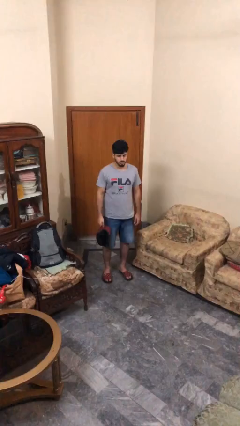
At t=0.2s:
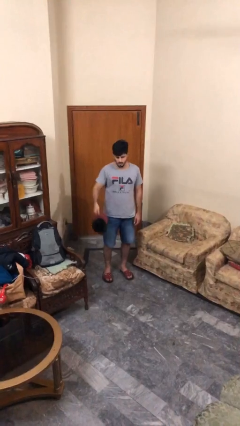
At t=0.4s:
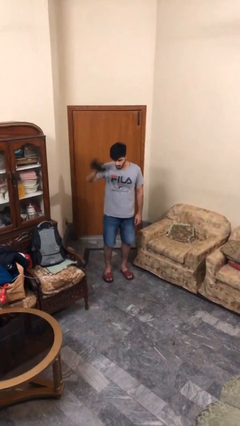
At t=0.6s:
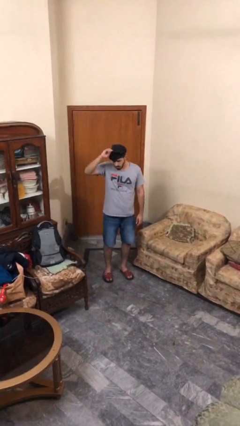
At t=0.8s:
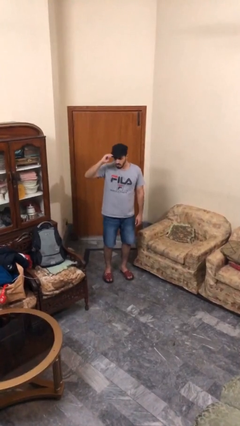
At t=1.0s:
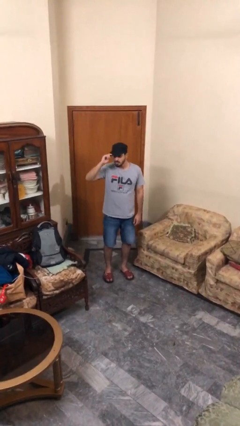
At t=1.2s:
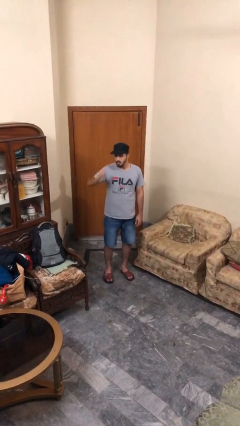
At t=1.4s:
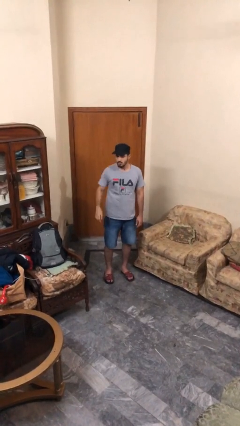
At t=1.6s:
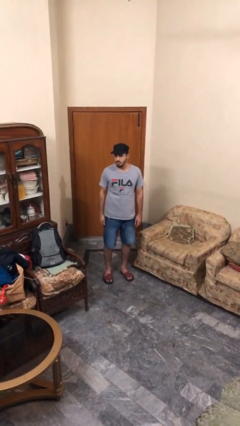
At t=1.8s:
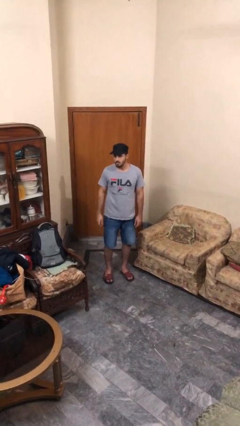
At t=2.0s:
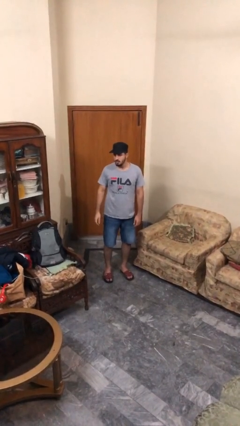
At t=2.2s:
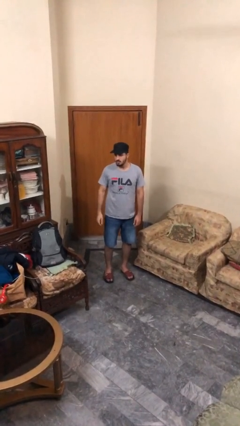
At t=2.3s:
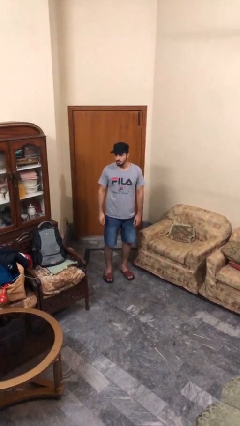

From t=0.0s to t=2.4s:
person puts on hat

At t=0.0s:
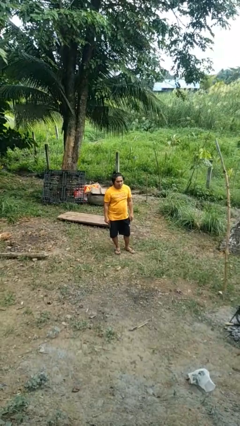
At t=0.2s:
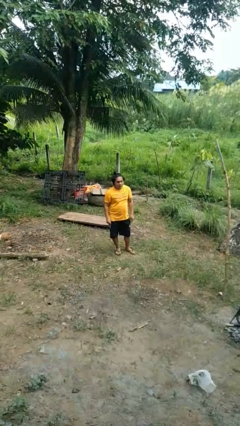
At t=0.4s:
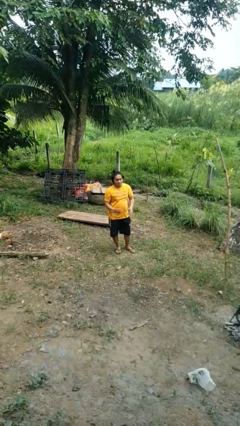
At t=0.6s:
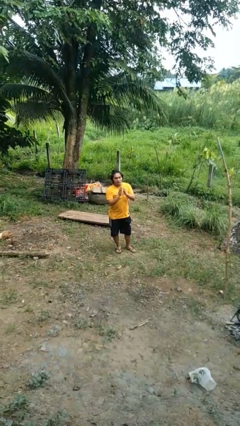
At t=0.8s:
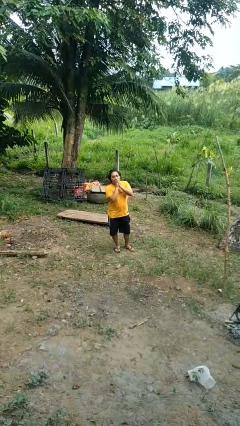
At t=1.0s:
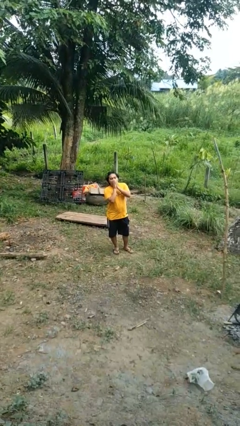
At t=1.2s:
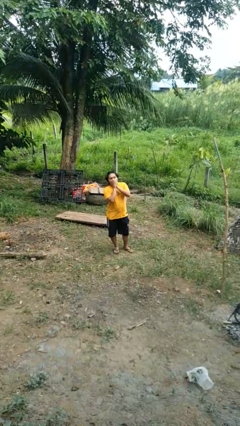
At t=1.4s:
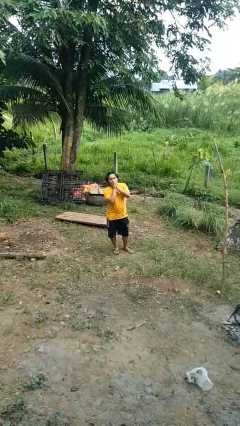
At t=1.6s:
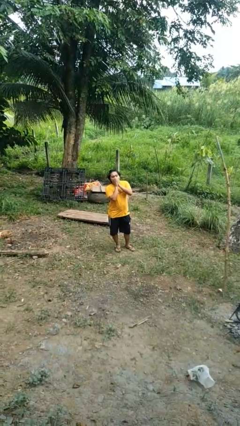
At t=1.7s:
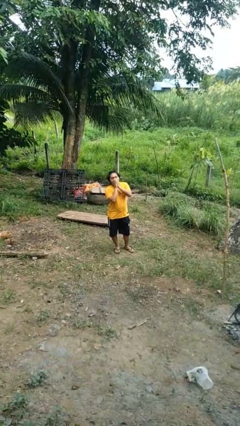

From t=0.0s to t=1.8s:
person covers face with hands

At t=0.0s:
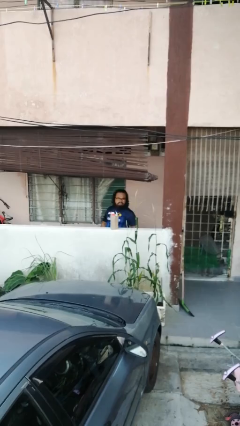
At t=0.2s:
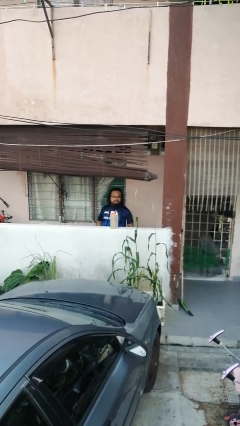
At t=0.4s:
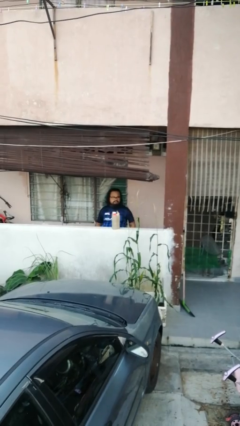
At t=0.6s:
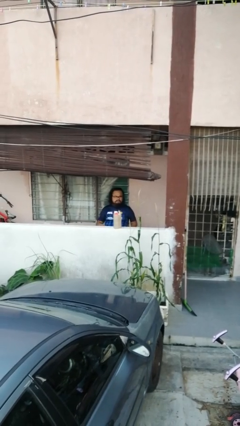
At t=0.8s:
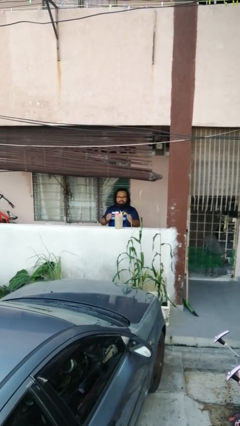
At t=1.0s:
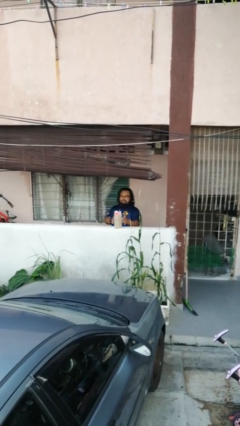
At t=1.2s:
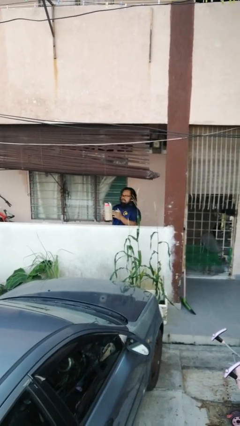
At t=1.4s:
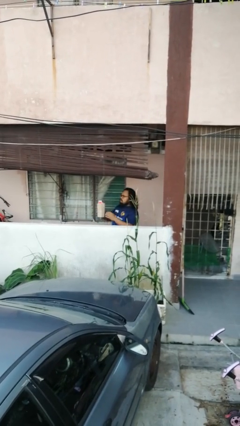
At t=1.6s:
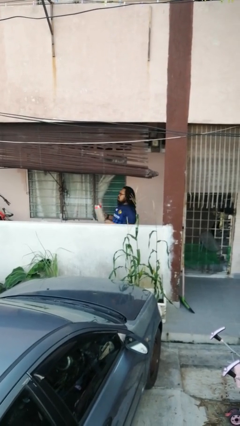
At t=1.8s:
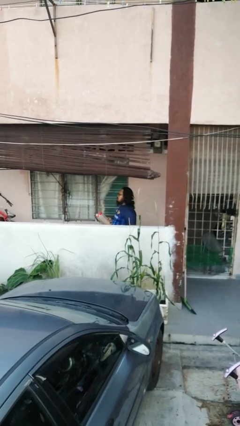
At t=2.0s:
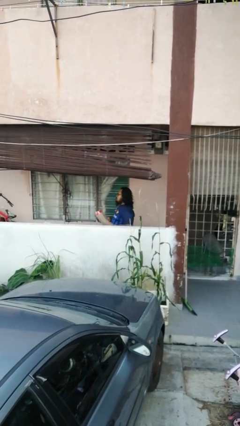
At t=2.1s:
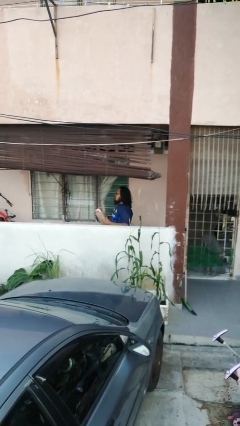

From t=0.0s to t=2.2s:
person picks up object from countertop

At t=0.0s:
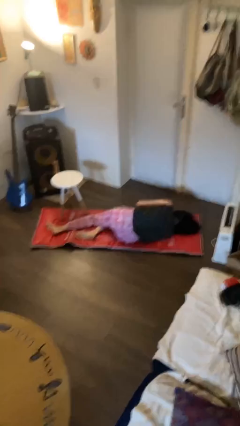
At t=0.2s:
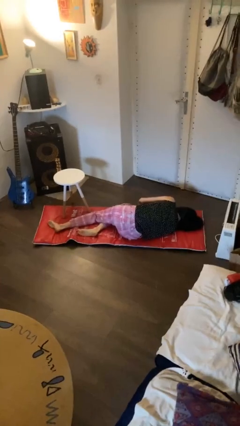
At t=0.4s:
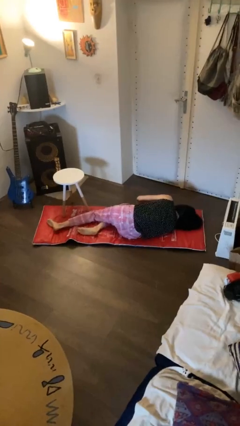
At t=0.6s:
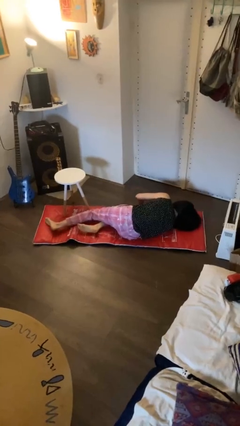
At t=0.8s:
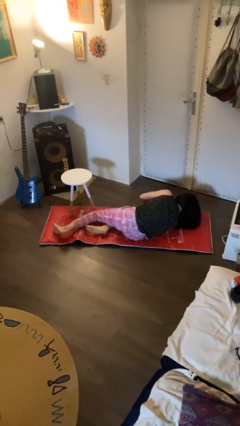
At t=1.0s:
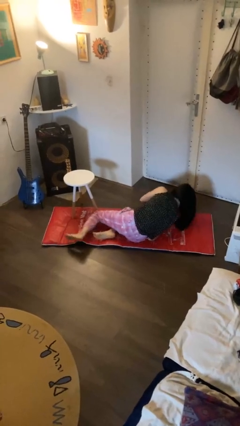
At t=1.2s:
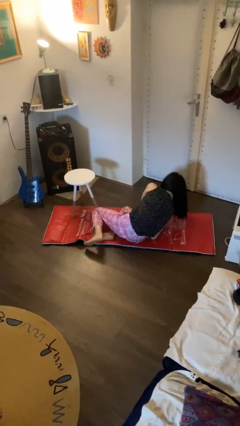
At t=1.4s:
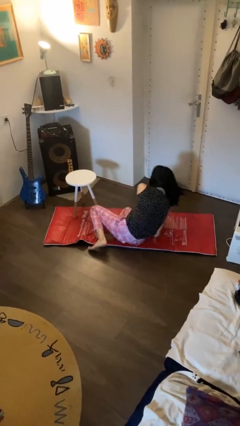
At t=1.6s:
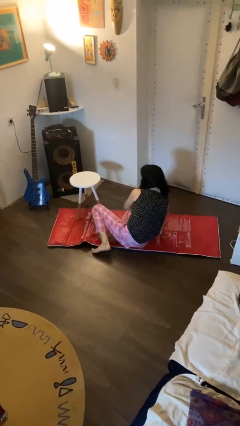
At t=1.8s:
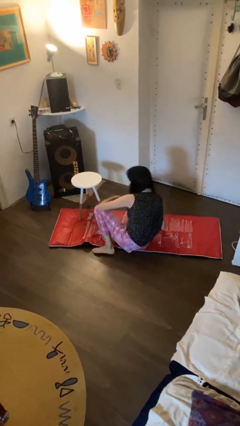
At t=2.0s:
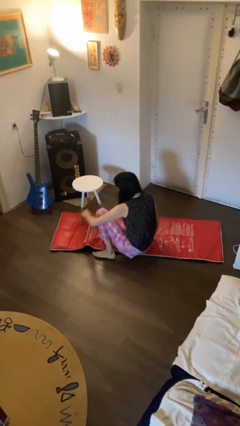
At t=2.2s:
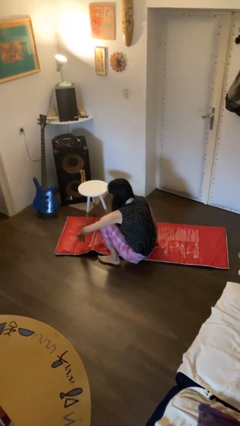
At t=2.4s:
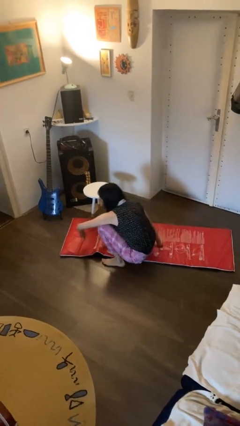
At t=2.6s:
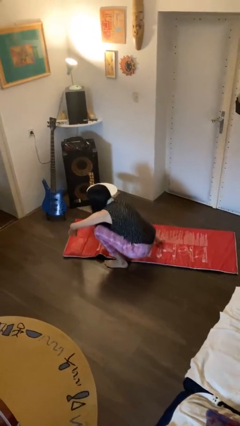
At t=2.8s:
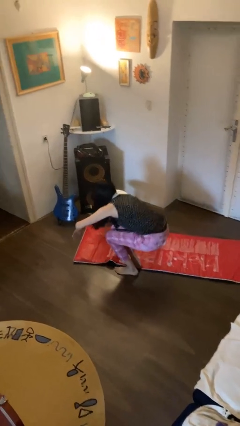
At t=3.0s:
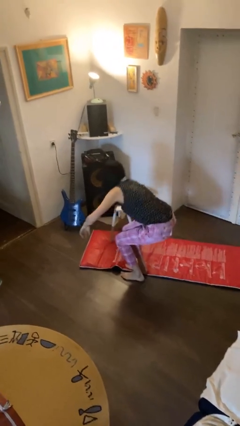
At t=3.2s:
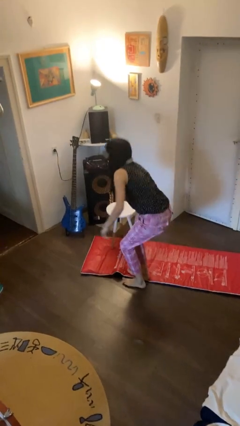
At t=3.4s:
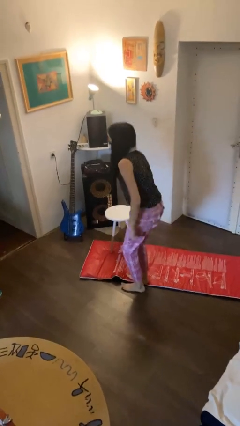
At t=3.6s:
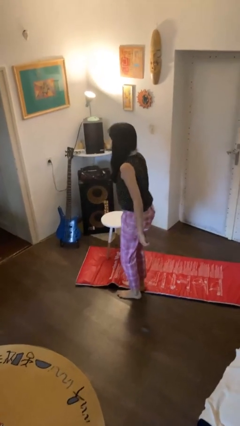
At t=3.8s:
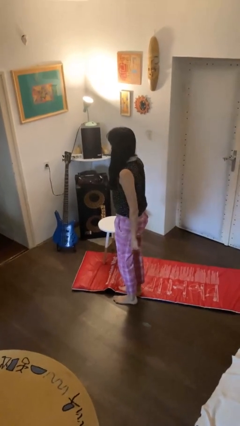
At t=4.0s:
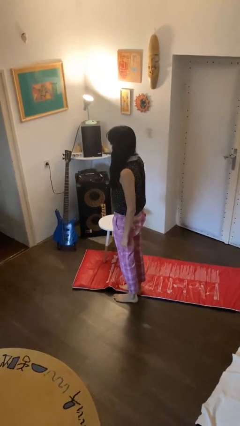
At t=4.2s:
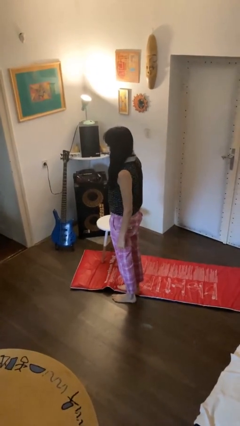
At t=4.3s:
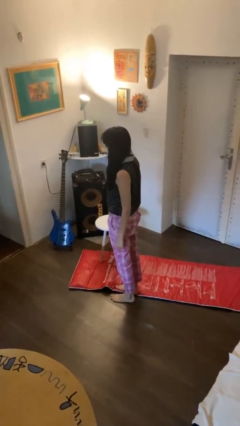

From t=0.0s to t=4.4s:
person stands up from floor

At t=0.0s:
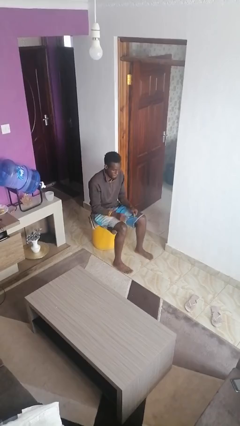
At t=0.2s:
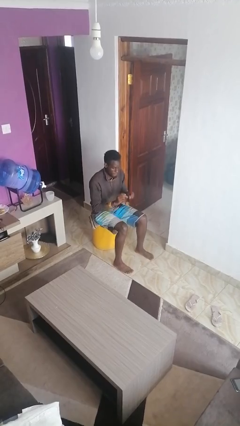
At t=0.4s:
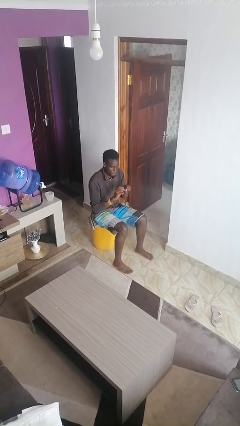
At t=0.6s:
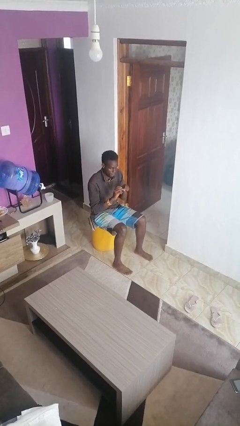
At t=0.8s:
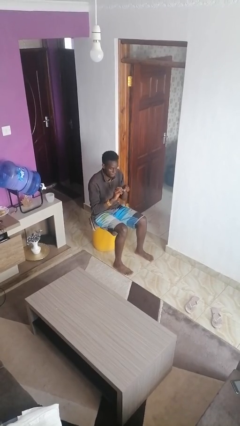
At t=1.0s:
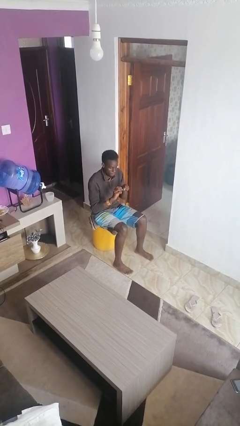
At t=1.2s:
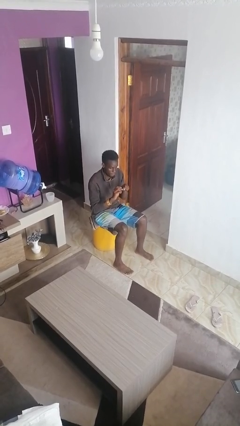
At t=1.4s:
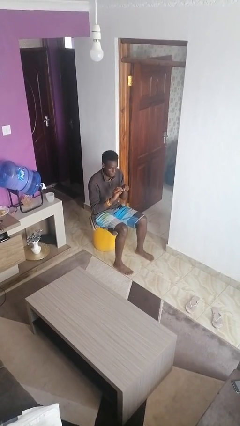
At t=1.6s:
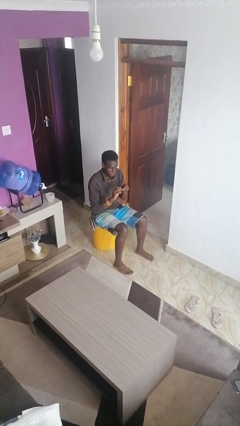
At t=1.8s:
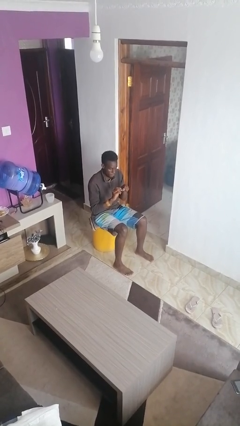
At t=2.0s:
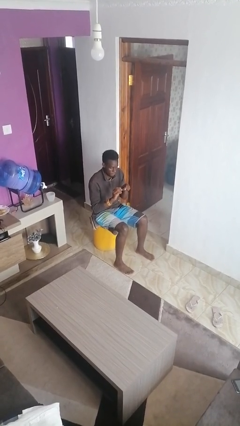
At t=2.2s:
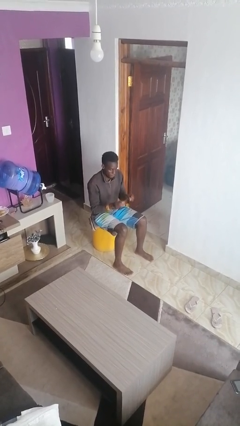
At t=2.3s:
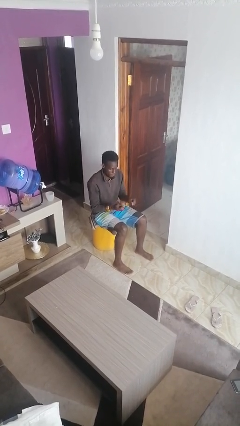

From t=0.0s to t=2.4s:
person files fingernails

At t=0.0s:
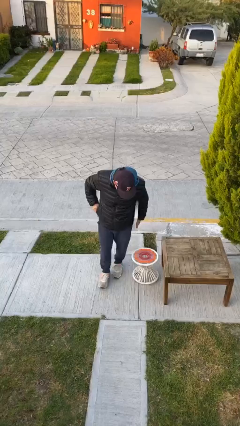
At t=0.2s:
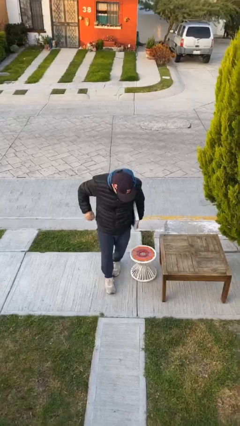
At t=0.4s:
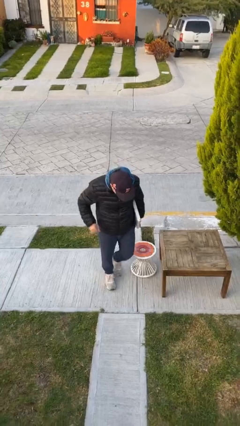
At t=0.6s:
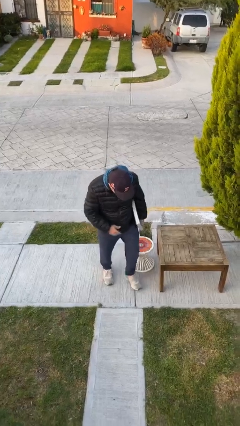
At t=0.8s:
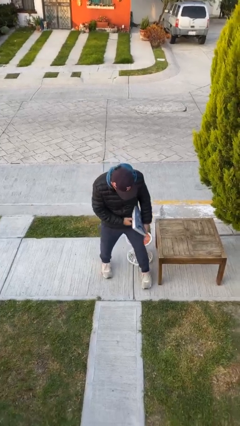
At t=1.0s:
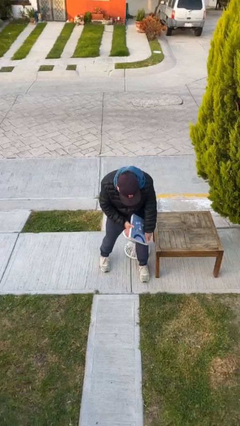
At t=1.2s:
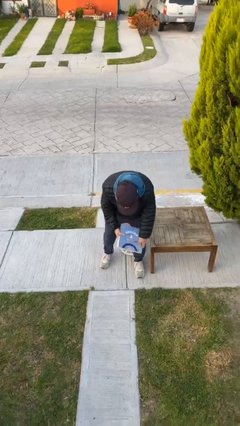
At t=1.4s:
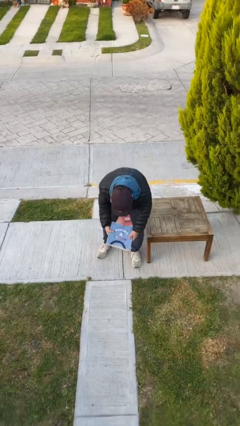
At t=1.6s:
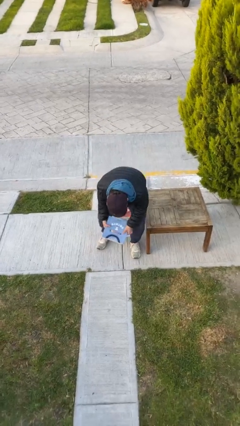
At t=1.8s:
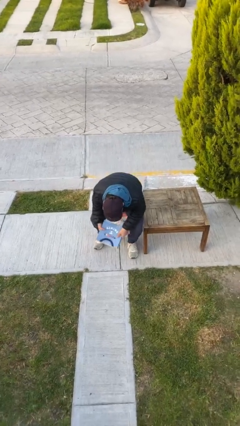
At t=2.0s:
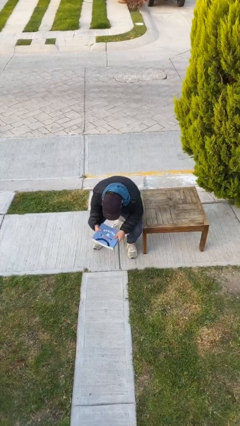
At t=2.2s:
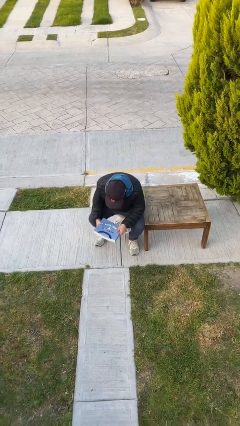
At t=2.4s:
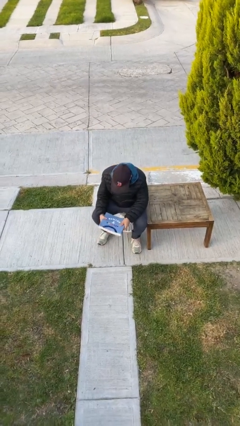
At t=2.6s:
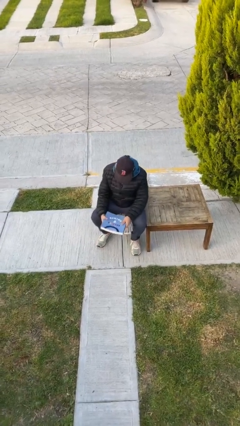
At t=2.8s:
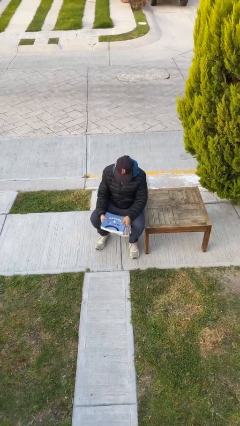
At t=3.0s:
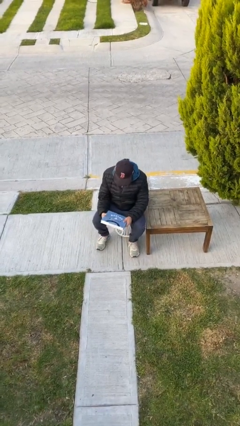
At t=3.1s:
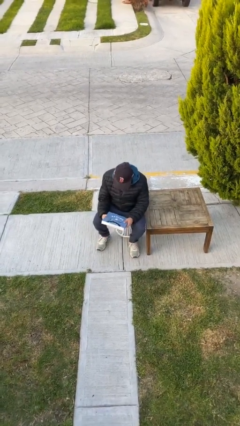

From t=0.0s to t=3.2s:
person sits down

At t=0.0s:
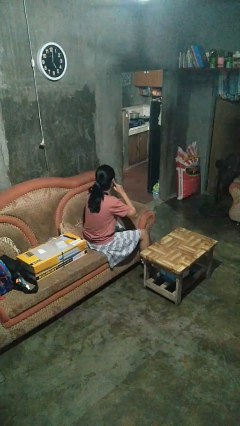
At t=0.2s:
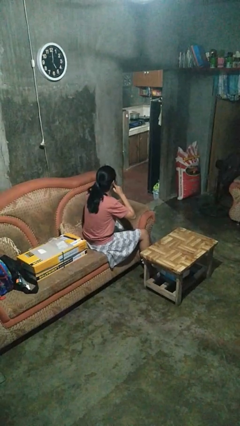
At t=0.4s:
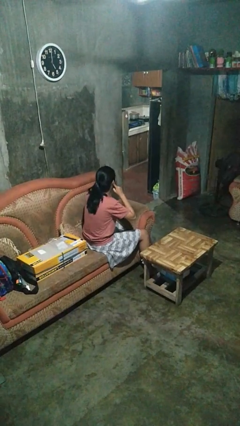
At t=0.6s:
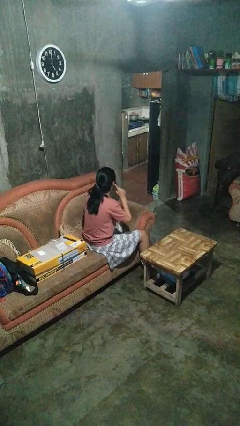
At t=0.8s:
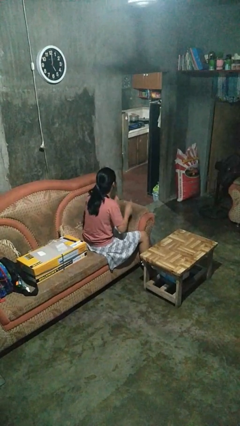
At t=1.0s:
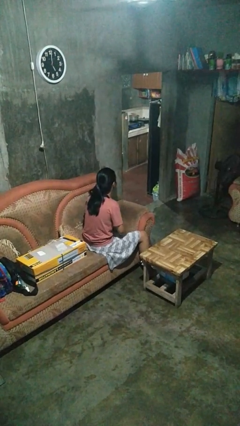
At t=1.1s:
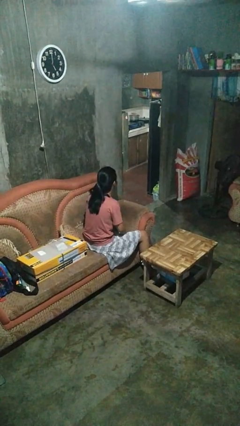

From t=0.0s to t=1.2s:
person puts fingers in ear
